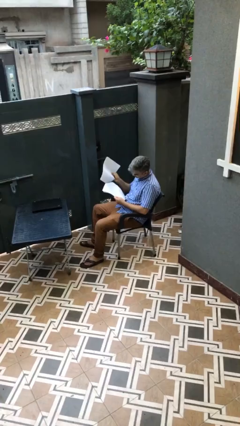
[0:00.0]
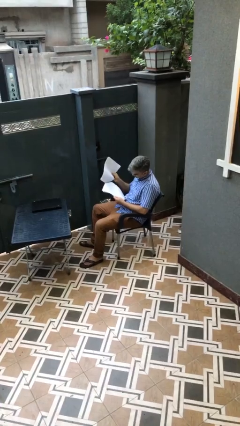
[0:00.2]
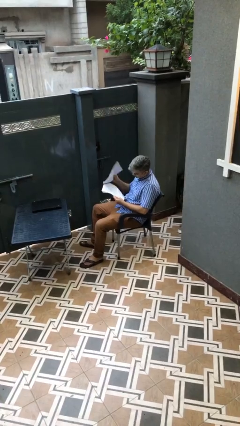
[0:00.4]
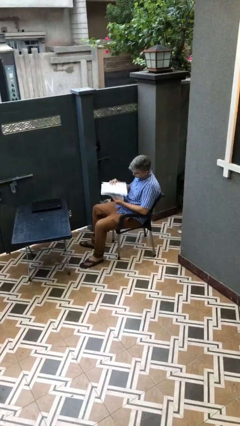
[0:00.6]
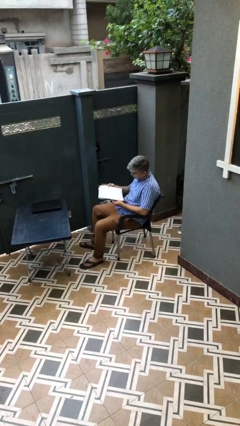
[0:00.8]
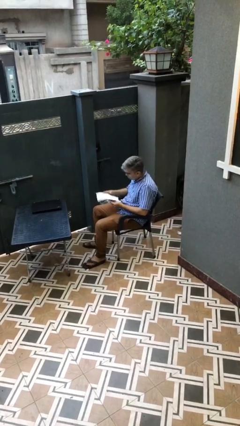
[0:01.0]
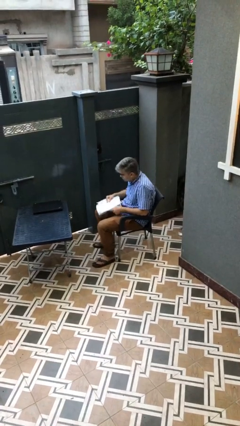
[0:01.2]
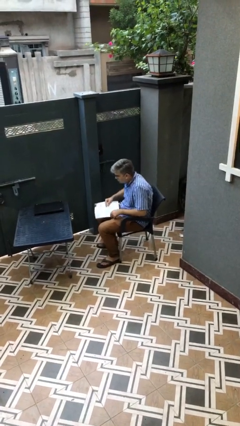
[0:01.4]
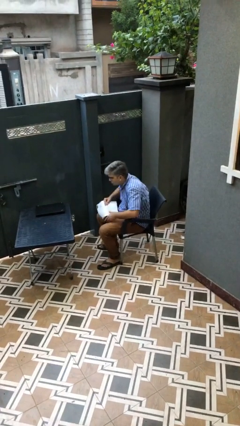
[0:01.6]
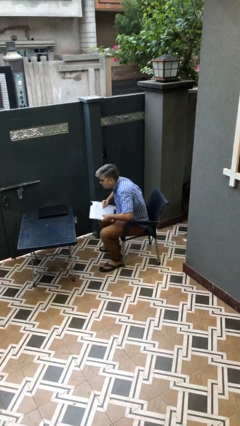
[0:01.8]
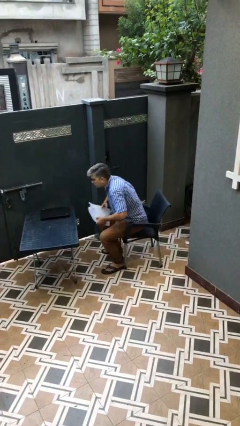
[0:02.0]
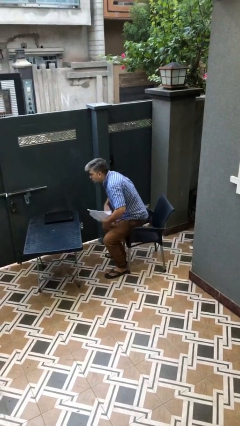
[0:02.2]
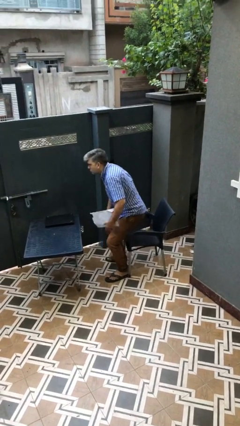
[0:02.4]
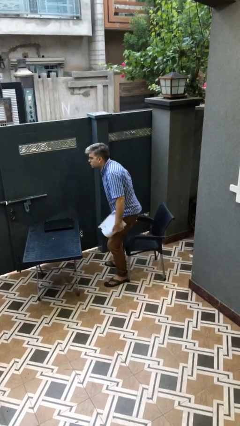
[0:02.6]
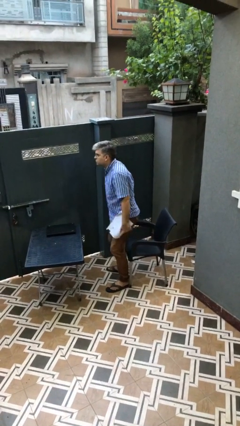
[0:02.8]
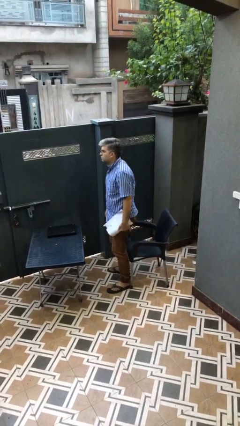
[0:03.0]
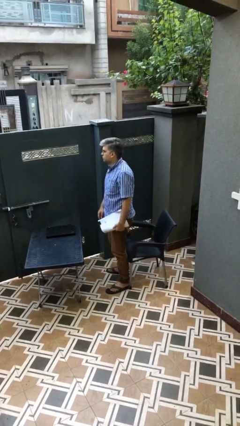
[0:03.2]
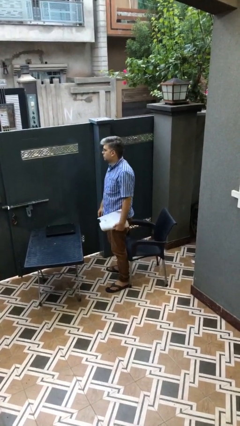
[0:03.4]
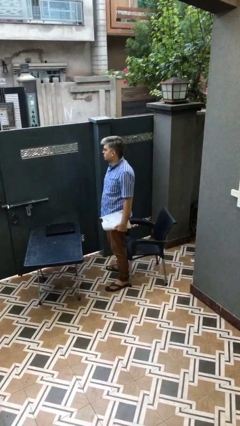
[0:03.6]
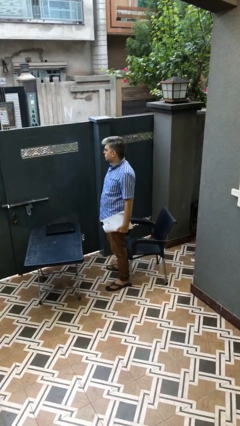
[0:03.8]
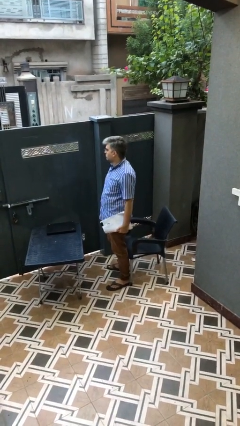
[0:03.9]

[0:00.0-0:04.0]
person stands up

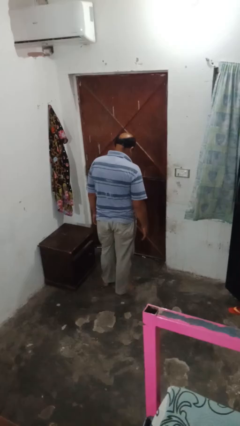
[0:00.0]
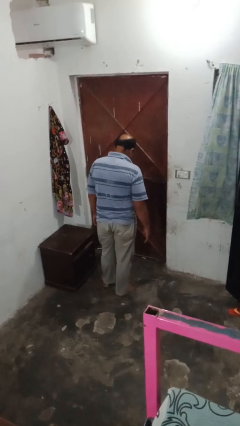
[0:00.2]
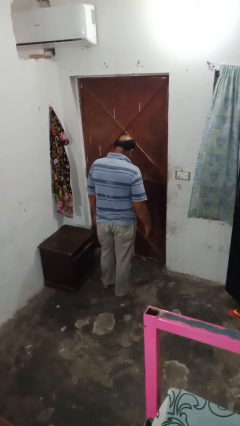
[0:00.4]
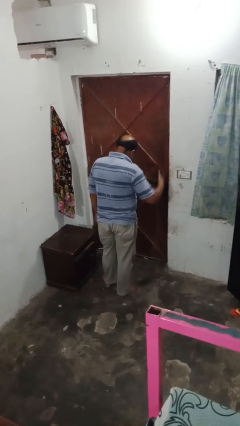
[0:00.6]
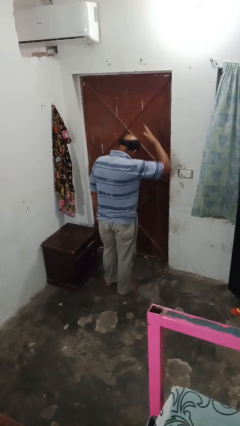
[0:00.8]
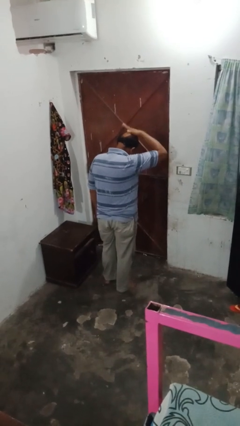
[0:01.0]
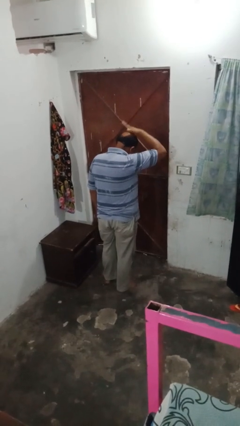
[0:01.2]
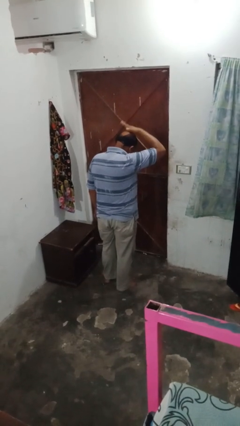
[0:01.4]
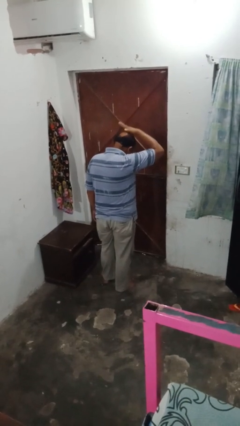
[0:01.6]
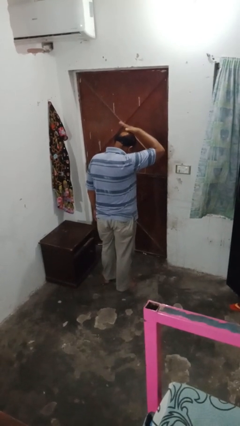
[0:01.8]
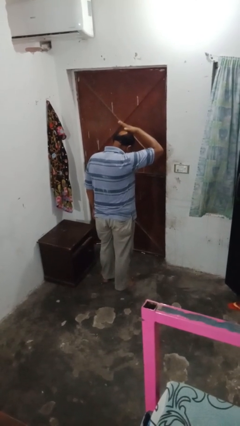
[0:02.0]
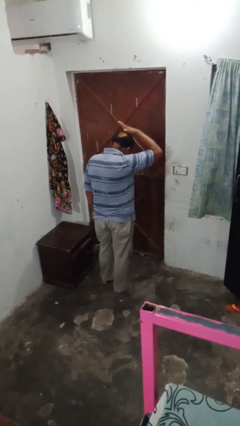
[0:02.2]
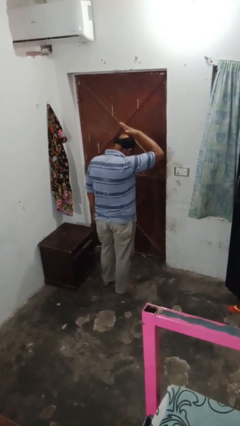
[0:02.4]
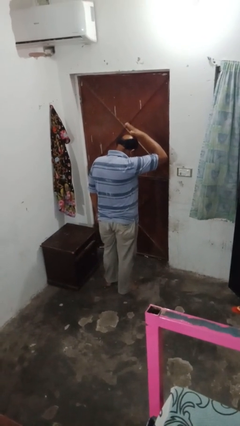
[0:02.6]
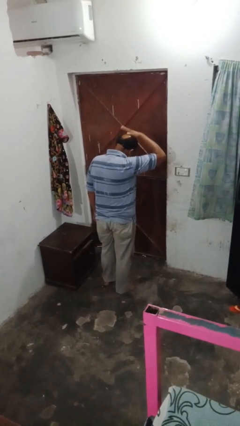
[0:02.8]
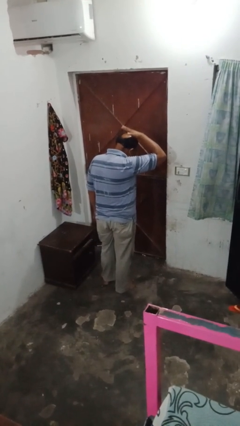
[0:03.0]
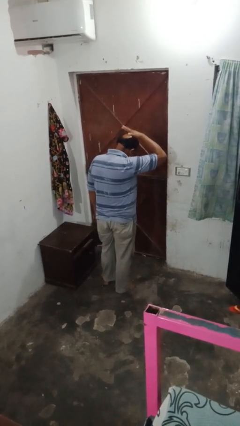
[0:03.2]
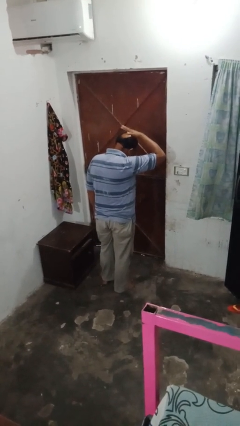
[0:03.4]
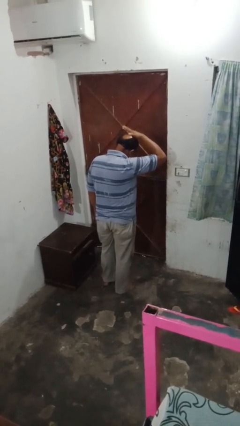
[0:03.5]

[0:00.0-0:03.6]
person pats head

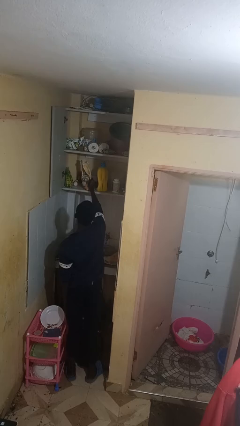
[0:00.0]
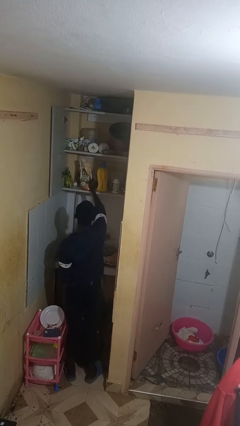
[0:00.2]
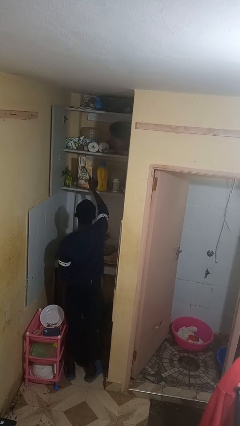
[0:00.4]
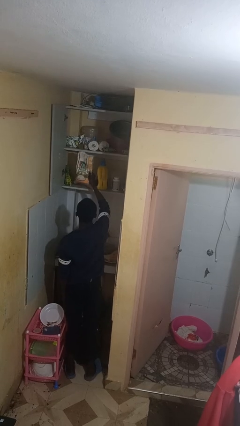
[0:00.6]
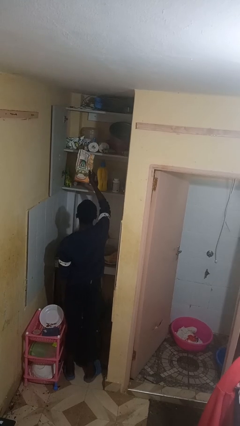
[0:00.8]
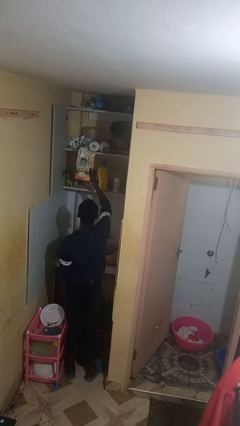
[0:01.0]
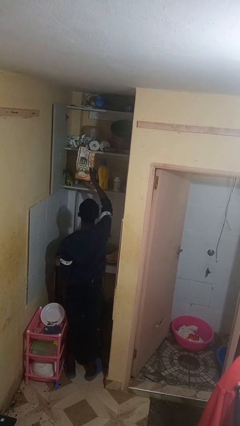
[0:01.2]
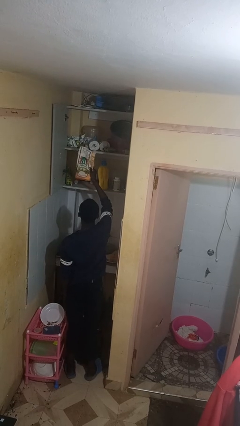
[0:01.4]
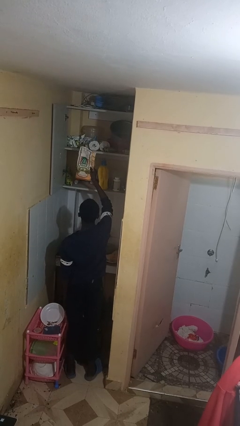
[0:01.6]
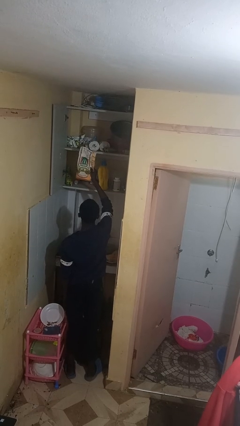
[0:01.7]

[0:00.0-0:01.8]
person takes object from cabinet

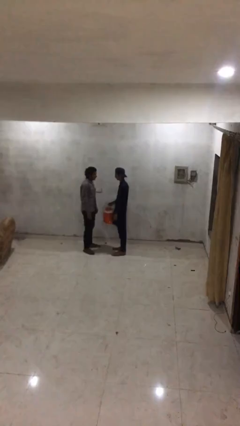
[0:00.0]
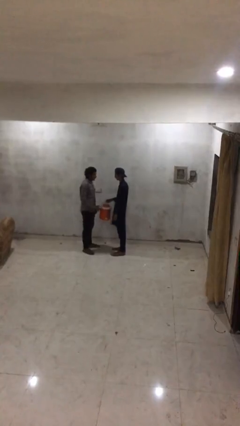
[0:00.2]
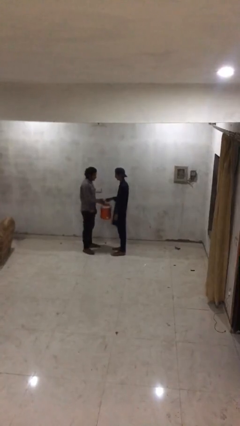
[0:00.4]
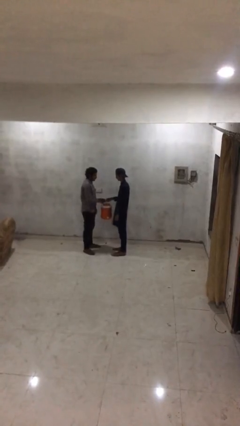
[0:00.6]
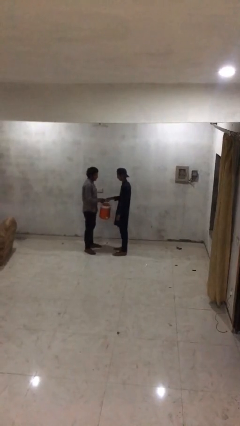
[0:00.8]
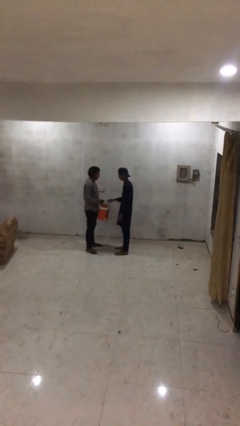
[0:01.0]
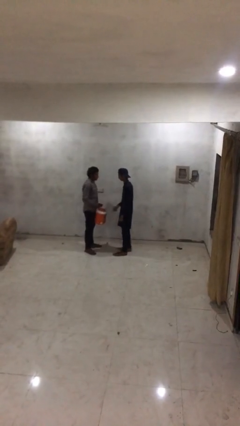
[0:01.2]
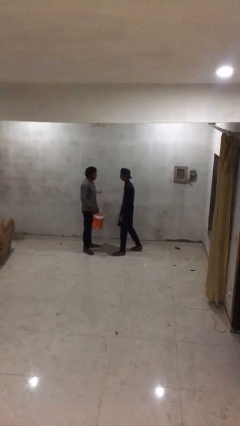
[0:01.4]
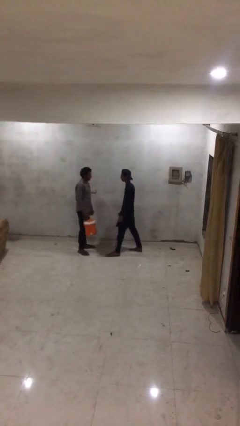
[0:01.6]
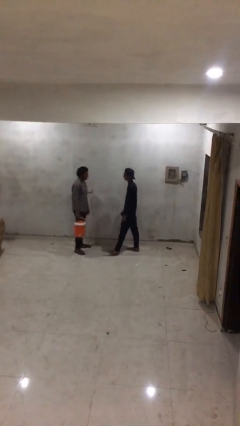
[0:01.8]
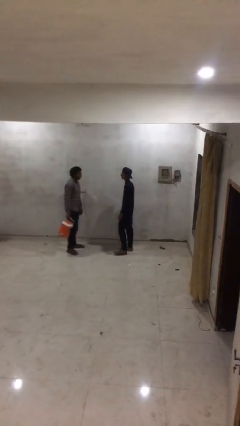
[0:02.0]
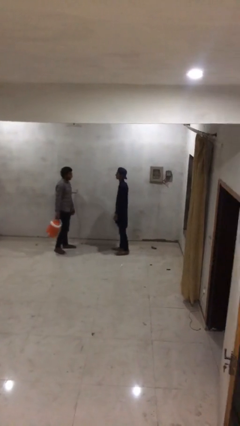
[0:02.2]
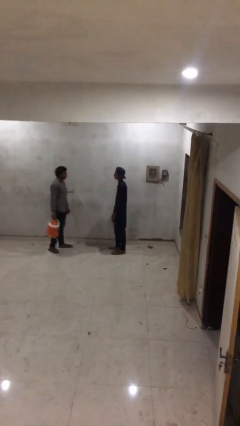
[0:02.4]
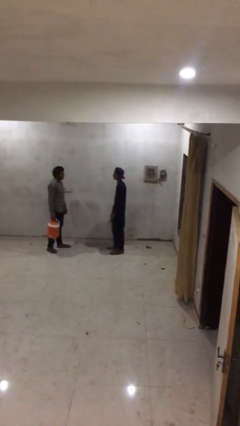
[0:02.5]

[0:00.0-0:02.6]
person transfers object to person

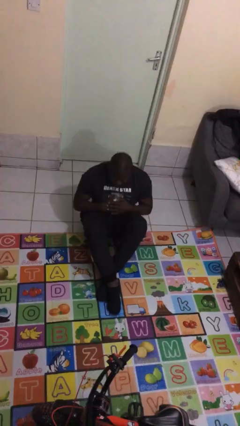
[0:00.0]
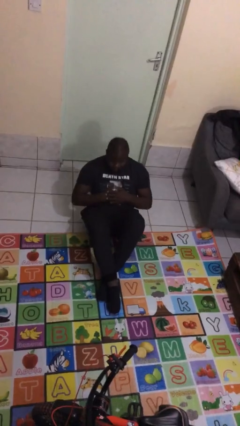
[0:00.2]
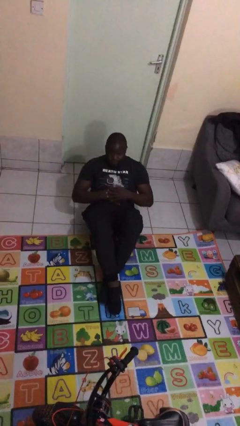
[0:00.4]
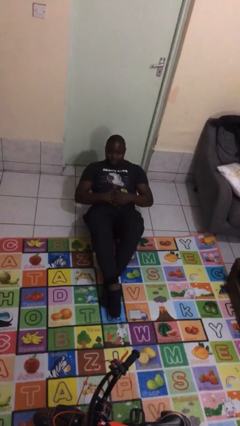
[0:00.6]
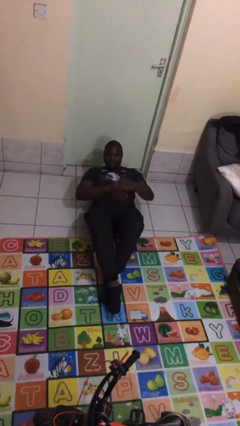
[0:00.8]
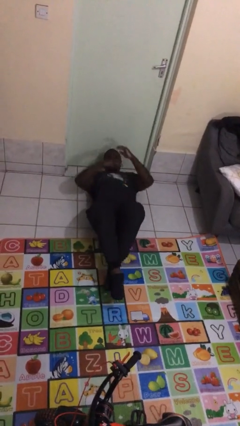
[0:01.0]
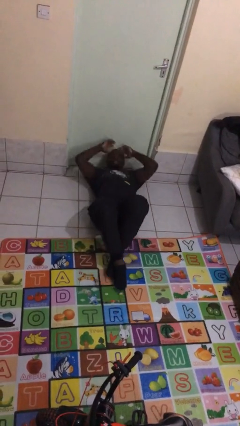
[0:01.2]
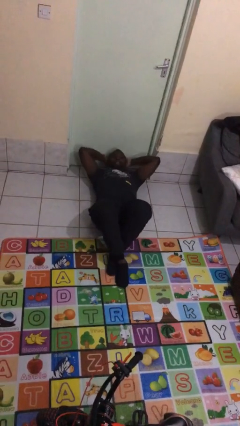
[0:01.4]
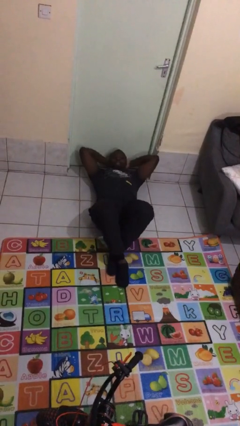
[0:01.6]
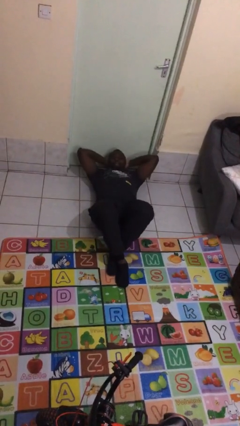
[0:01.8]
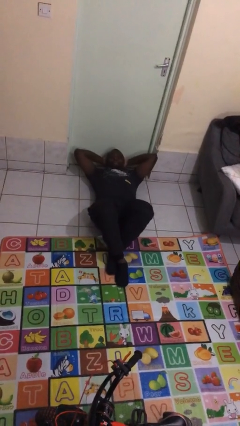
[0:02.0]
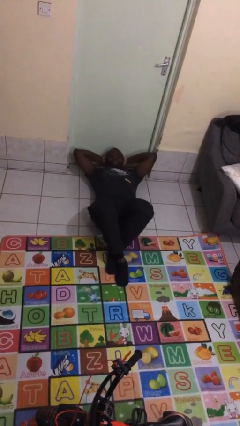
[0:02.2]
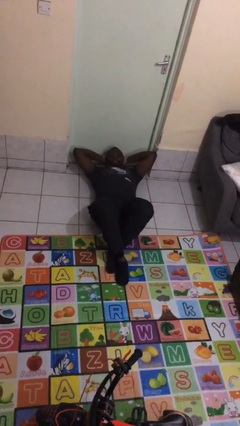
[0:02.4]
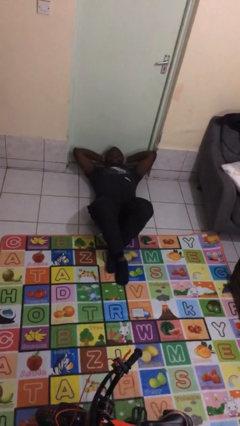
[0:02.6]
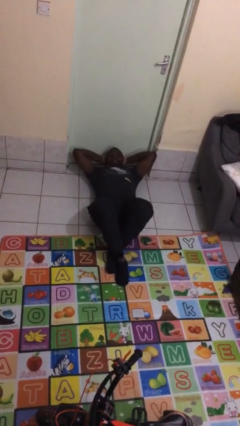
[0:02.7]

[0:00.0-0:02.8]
person exercises with situp

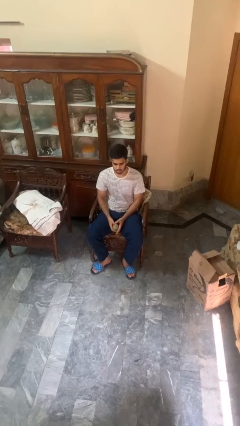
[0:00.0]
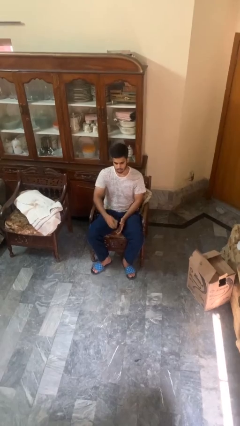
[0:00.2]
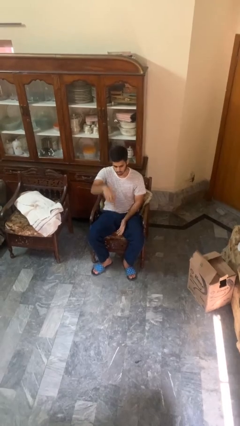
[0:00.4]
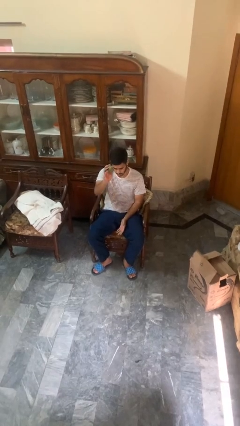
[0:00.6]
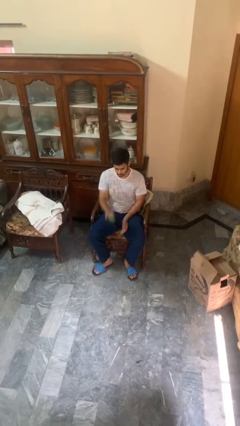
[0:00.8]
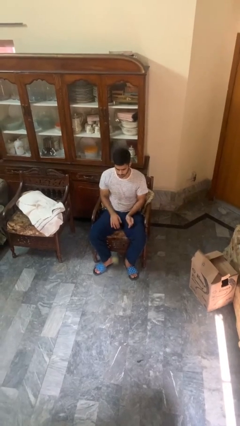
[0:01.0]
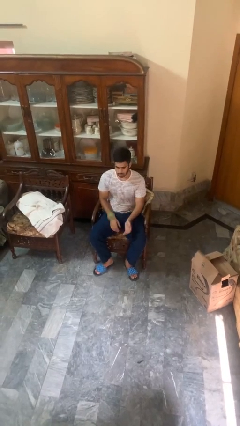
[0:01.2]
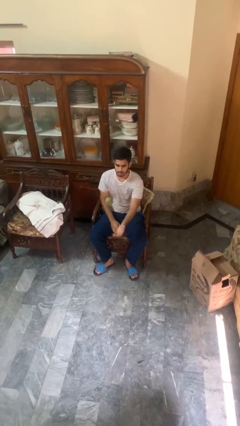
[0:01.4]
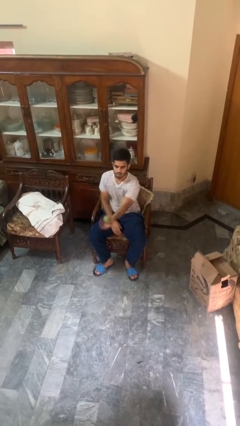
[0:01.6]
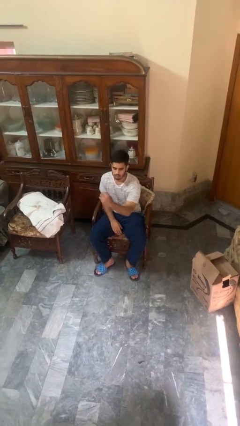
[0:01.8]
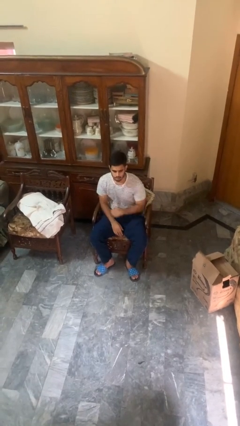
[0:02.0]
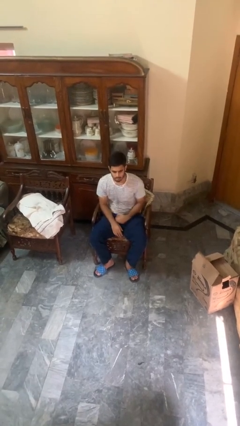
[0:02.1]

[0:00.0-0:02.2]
person bounces ball on floor

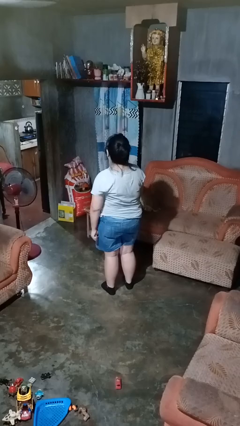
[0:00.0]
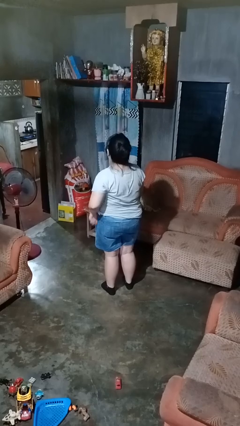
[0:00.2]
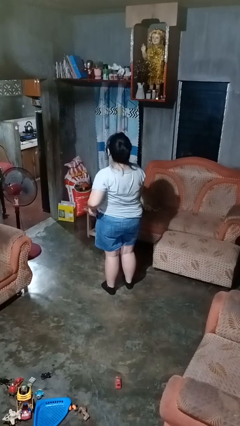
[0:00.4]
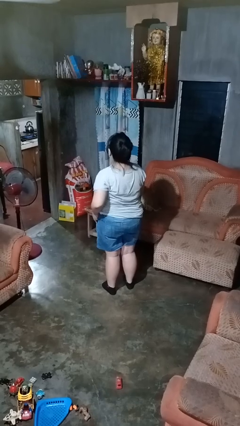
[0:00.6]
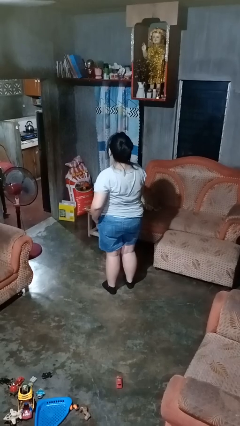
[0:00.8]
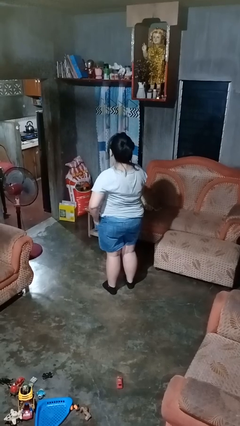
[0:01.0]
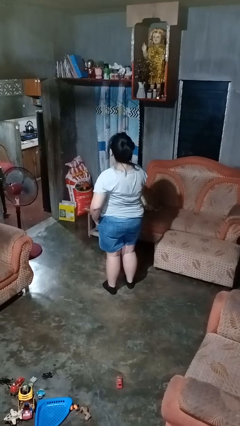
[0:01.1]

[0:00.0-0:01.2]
person puts hands in back pockets
